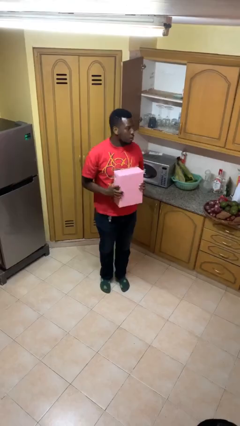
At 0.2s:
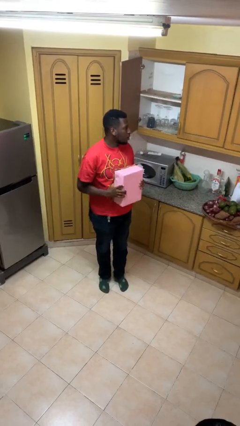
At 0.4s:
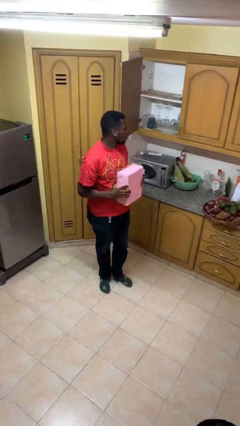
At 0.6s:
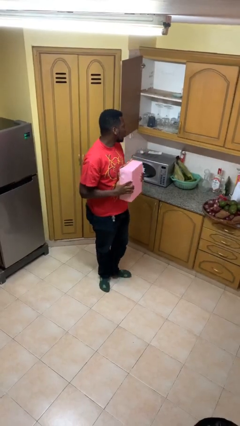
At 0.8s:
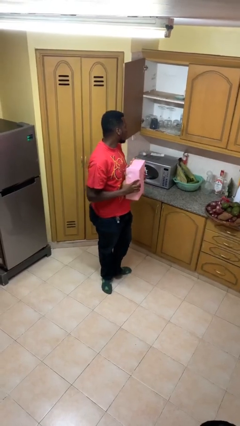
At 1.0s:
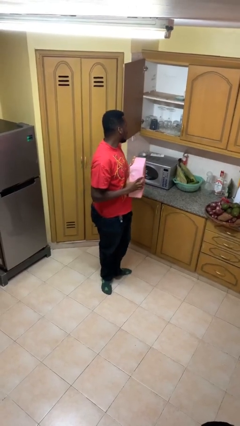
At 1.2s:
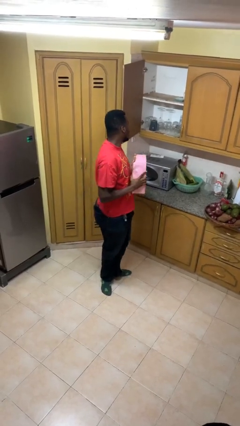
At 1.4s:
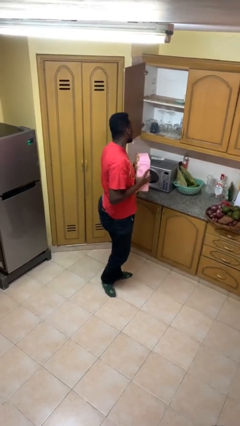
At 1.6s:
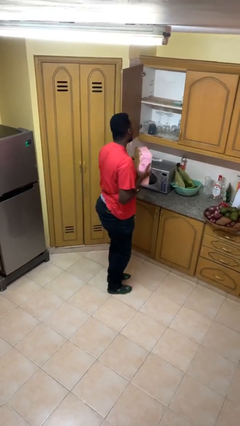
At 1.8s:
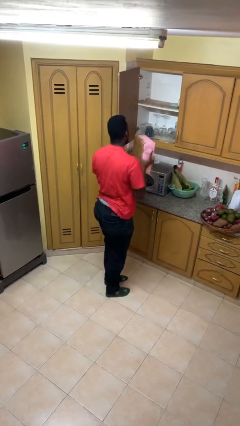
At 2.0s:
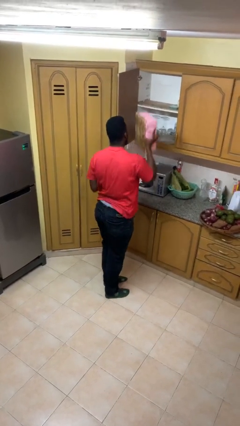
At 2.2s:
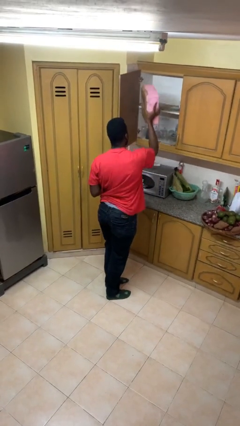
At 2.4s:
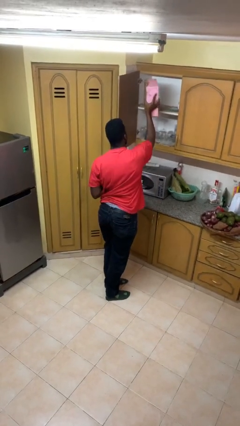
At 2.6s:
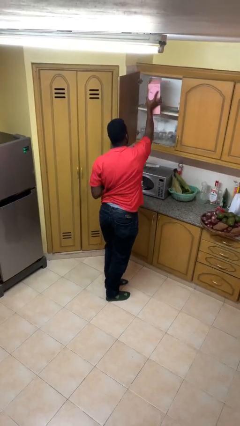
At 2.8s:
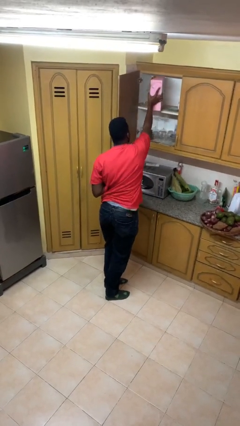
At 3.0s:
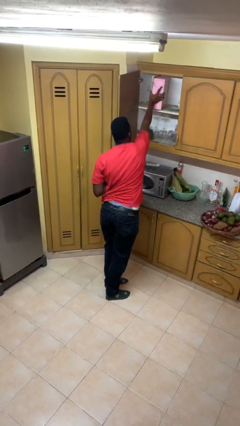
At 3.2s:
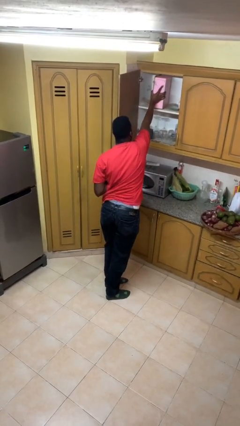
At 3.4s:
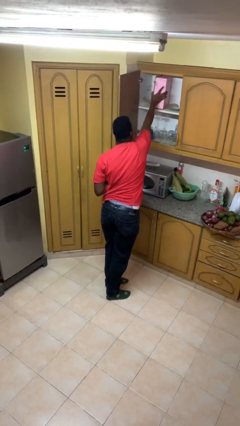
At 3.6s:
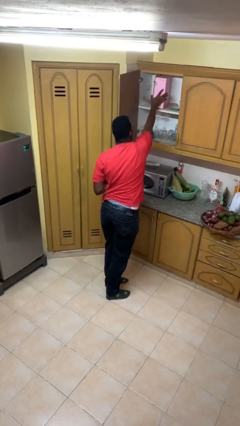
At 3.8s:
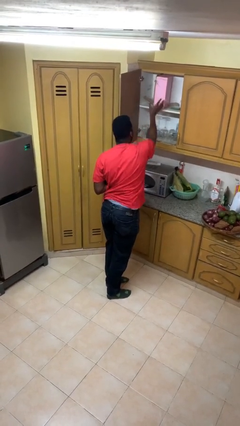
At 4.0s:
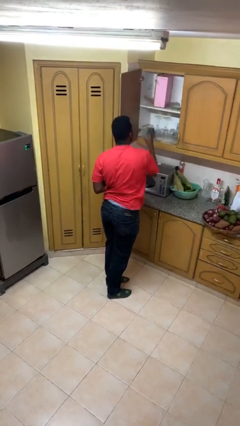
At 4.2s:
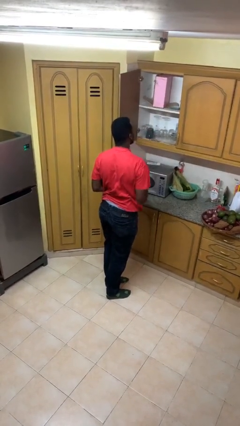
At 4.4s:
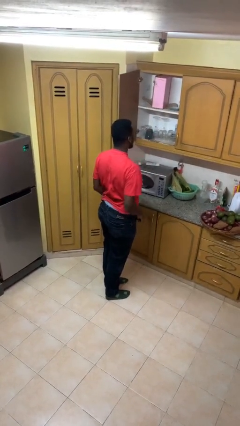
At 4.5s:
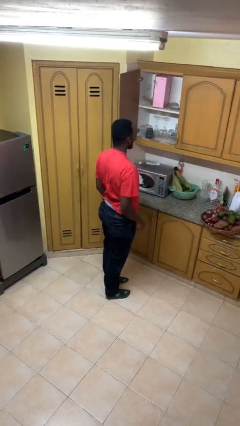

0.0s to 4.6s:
person puts down object on shelf

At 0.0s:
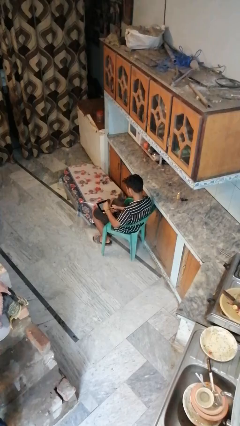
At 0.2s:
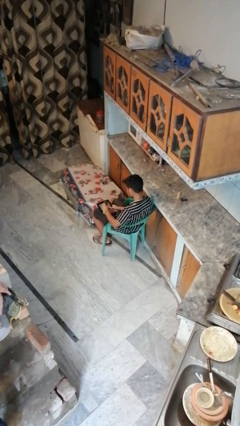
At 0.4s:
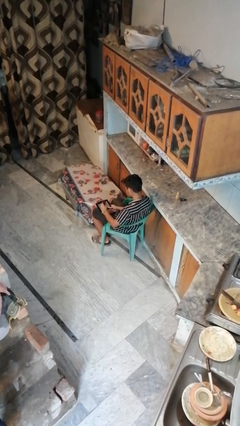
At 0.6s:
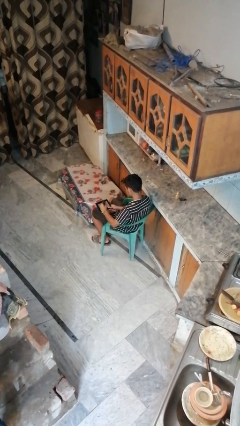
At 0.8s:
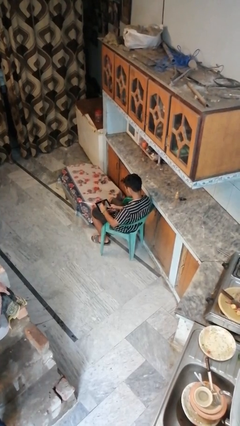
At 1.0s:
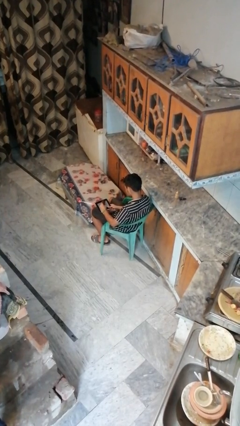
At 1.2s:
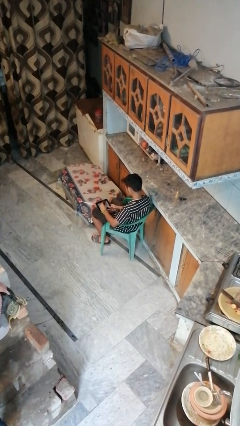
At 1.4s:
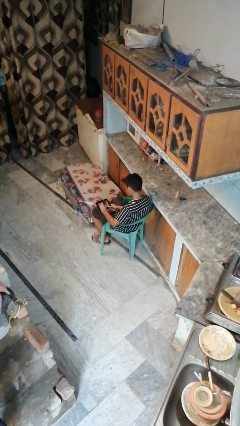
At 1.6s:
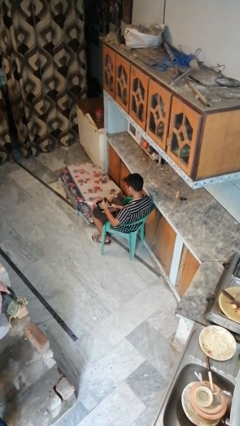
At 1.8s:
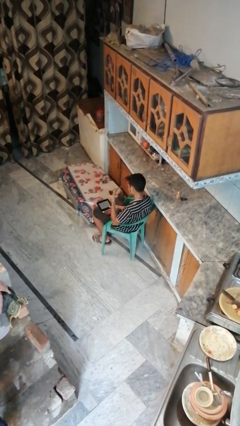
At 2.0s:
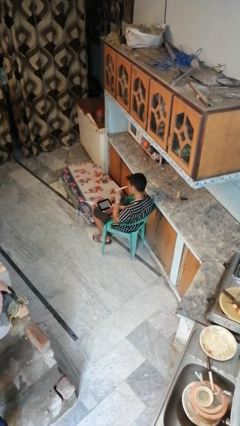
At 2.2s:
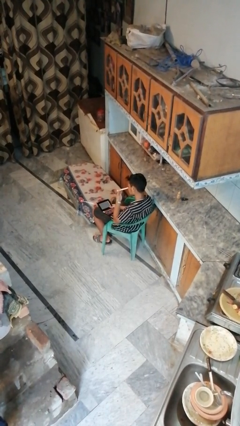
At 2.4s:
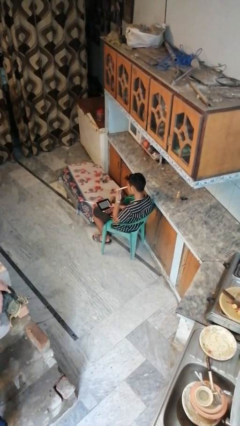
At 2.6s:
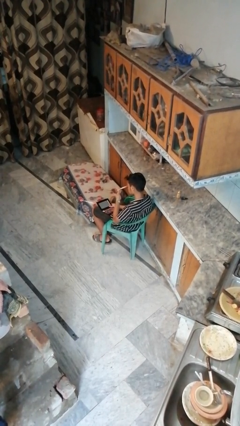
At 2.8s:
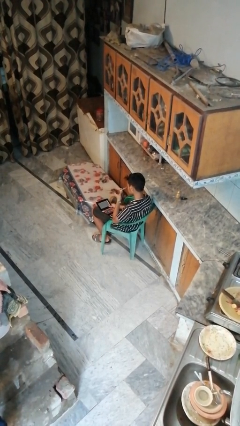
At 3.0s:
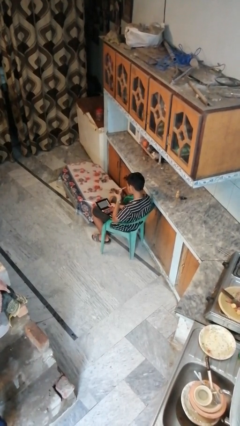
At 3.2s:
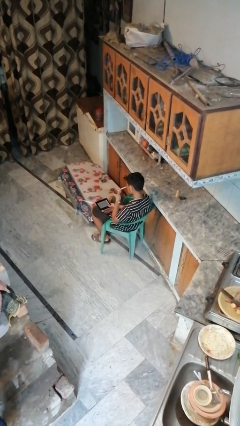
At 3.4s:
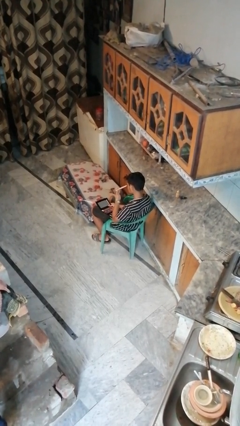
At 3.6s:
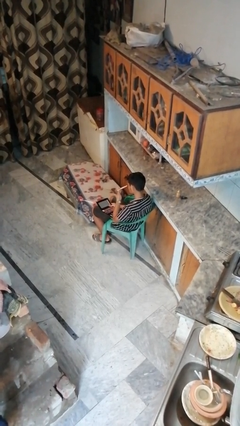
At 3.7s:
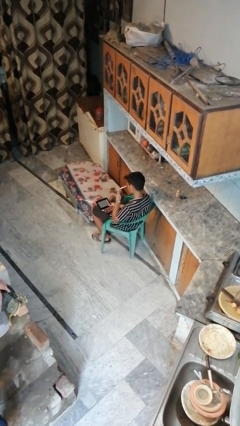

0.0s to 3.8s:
person applies eye makeup

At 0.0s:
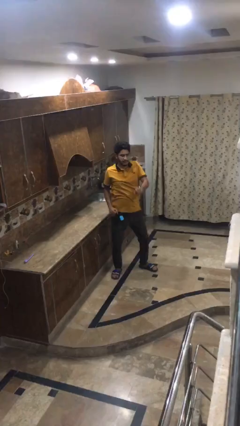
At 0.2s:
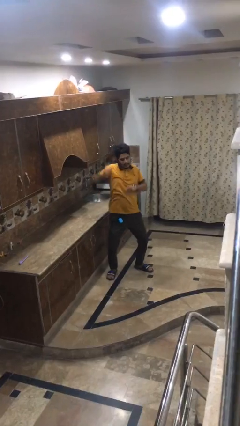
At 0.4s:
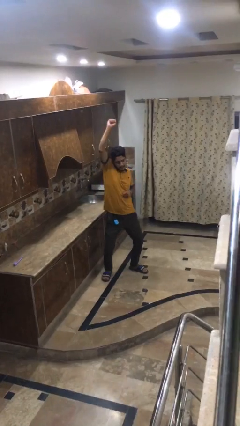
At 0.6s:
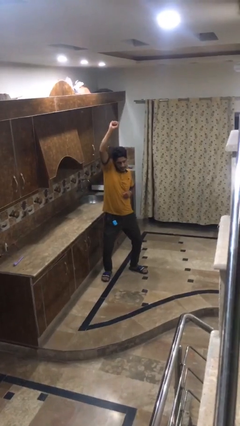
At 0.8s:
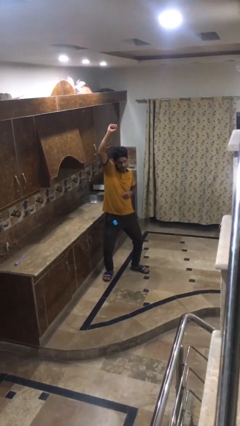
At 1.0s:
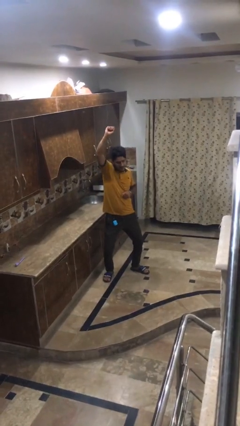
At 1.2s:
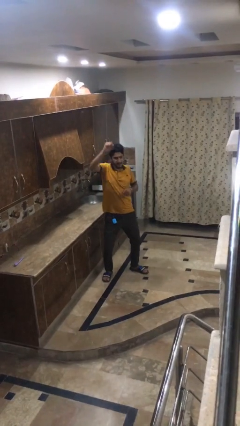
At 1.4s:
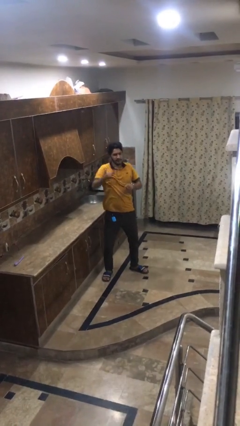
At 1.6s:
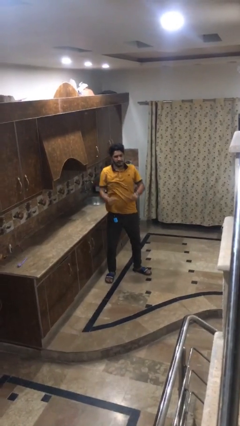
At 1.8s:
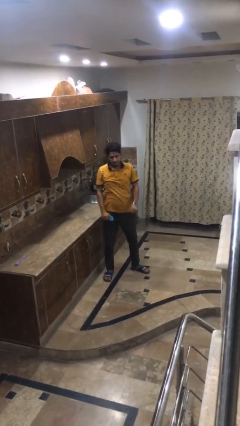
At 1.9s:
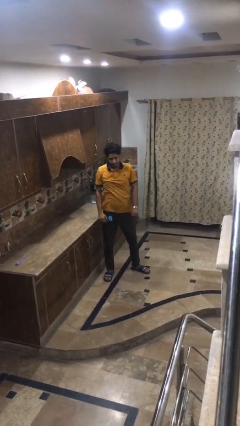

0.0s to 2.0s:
person punches

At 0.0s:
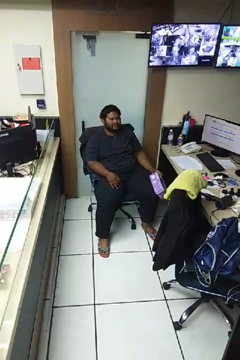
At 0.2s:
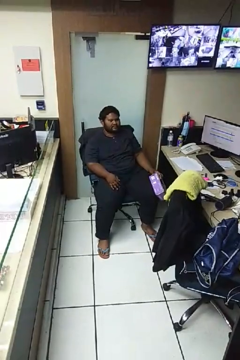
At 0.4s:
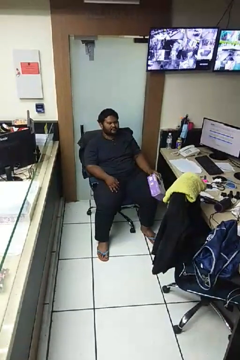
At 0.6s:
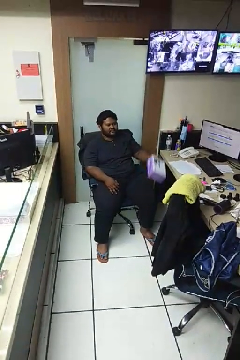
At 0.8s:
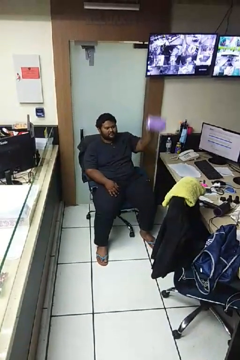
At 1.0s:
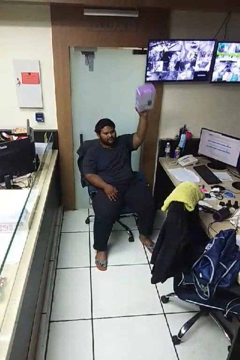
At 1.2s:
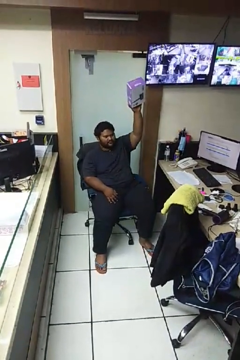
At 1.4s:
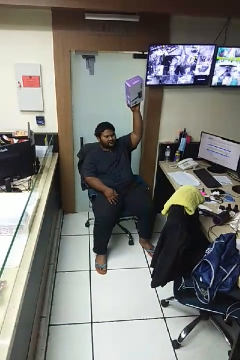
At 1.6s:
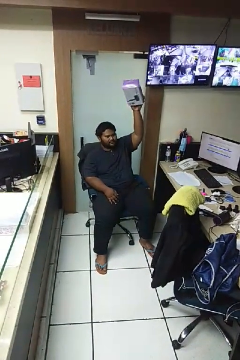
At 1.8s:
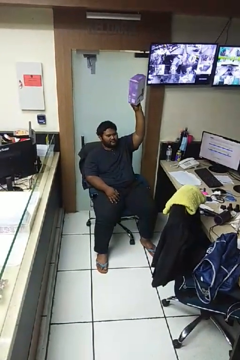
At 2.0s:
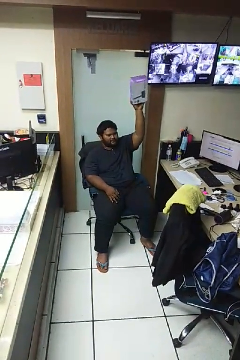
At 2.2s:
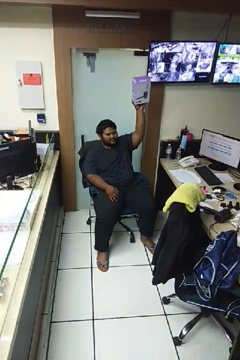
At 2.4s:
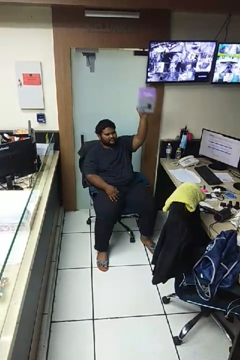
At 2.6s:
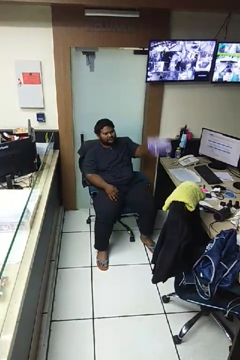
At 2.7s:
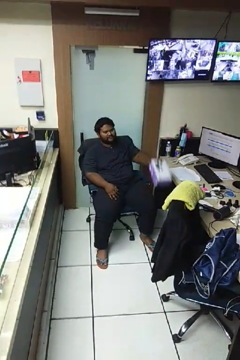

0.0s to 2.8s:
person holds object above head

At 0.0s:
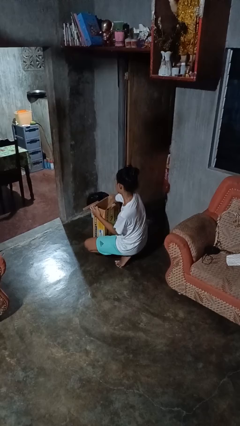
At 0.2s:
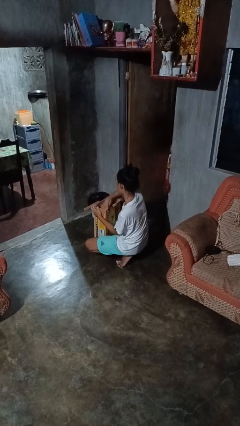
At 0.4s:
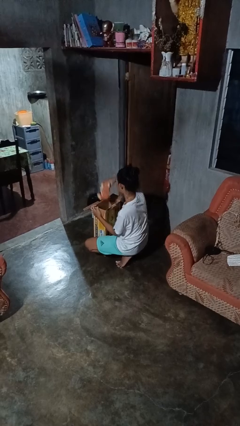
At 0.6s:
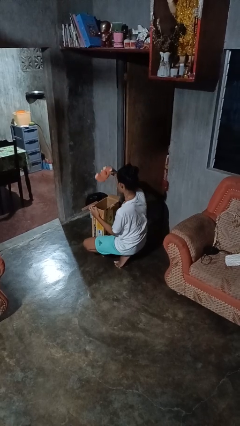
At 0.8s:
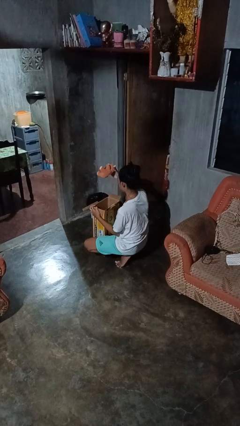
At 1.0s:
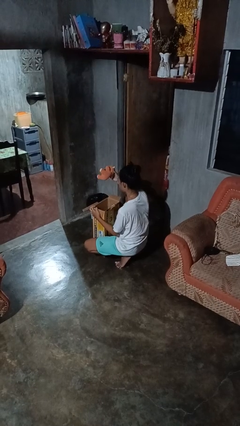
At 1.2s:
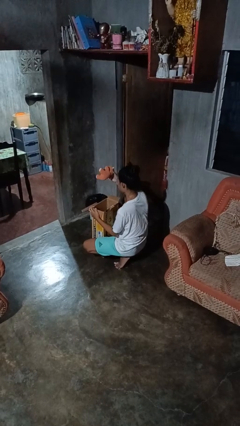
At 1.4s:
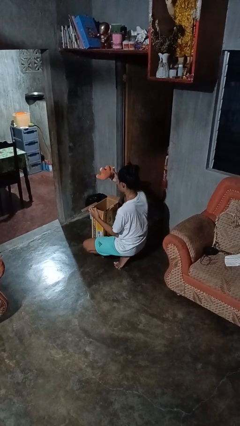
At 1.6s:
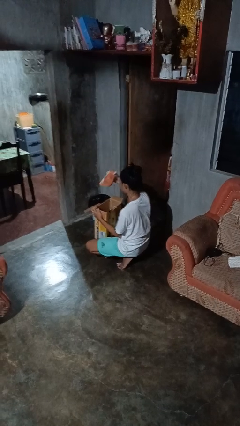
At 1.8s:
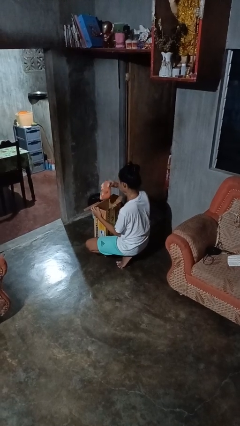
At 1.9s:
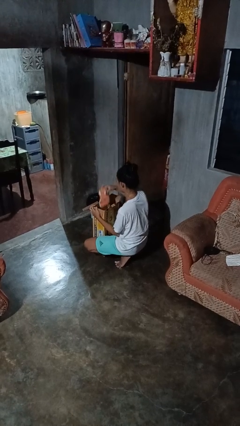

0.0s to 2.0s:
person takes object from box

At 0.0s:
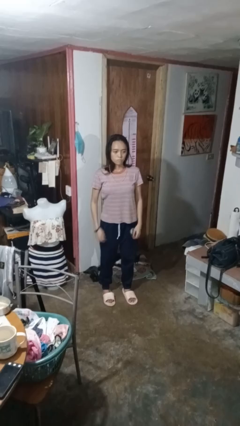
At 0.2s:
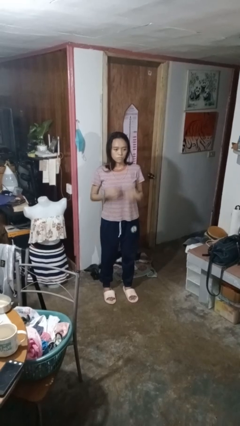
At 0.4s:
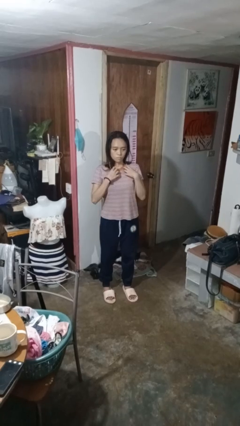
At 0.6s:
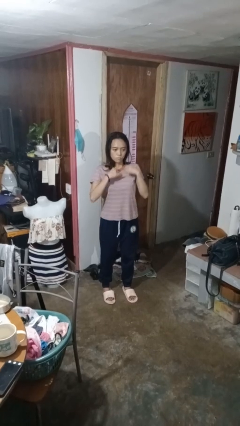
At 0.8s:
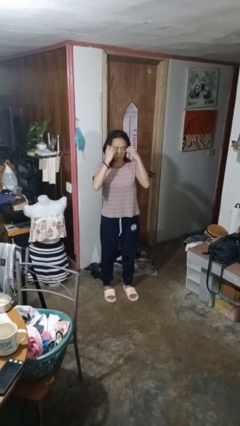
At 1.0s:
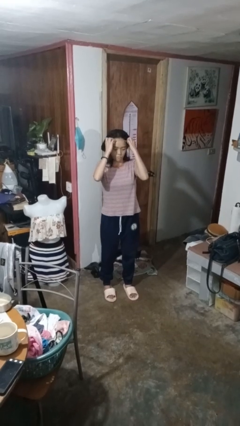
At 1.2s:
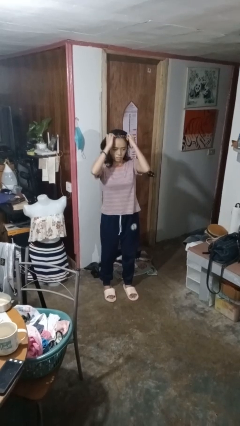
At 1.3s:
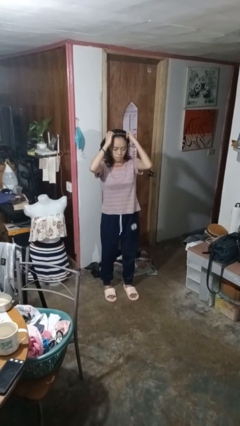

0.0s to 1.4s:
person takes off necklace

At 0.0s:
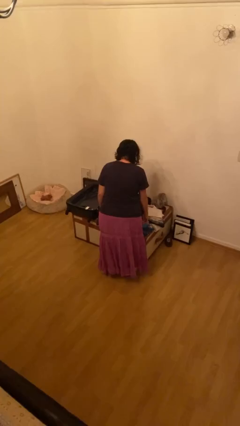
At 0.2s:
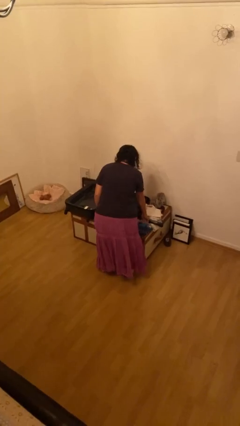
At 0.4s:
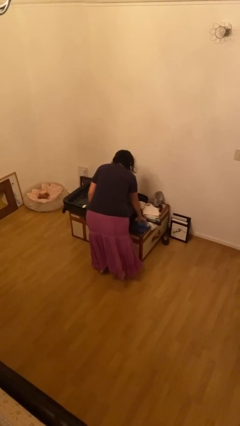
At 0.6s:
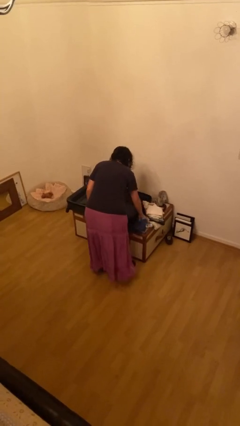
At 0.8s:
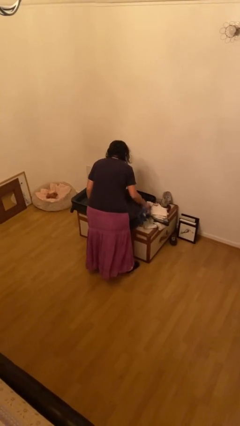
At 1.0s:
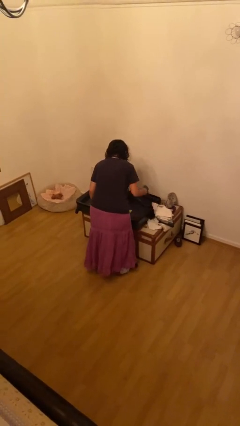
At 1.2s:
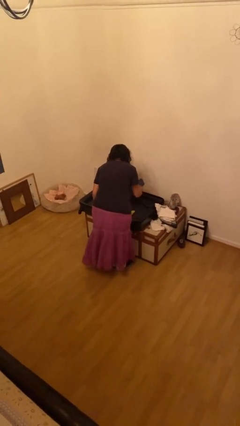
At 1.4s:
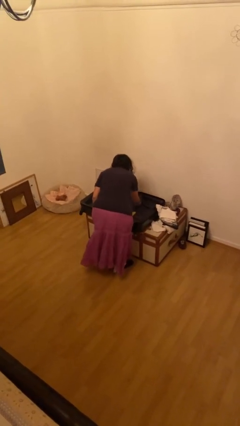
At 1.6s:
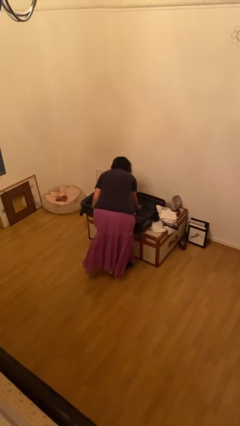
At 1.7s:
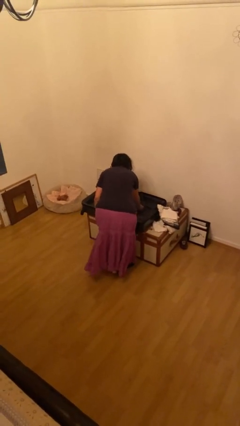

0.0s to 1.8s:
person unloads clothes from suitcase
